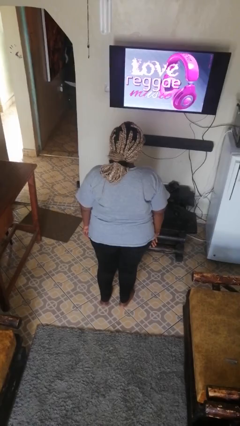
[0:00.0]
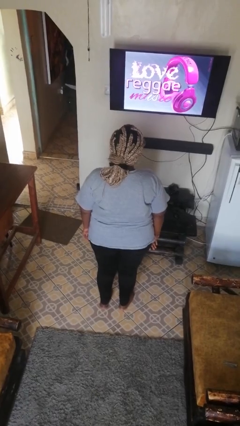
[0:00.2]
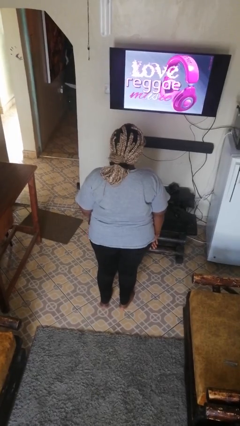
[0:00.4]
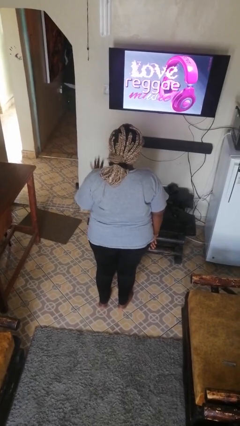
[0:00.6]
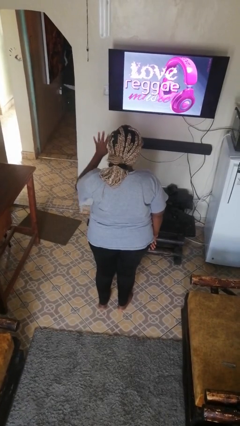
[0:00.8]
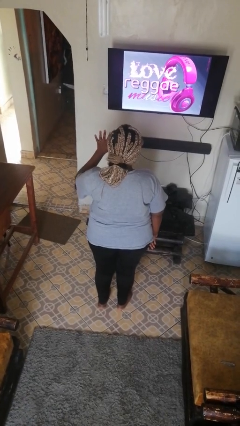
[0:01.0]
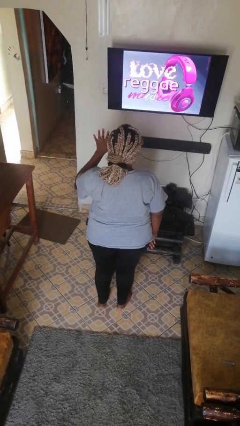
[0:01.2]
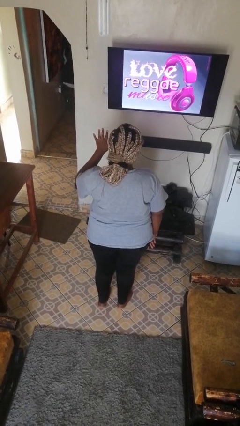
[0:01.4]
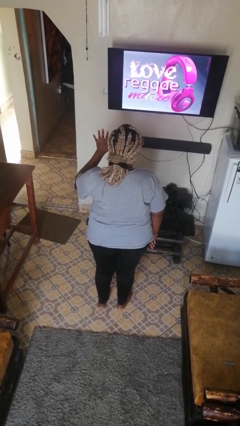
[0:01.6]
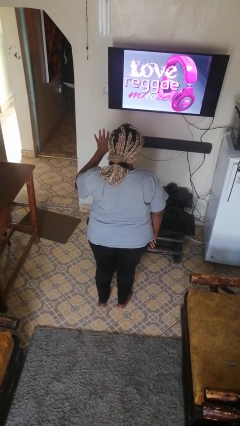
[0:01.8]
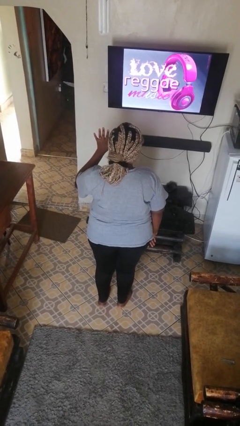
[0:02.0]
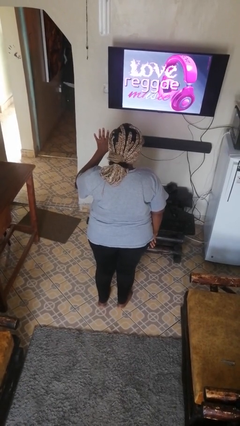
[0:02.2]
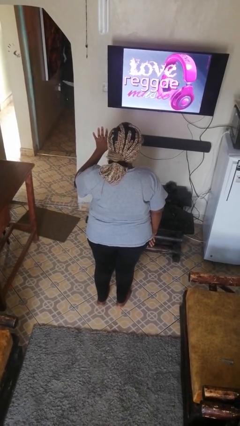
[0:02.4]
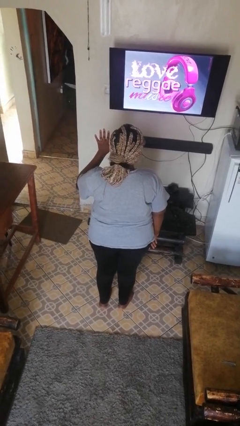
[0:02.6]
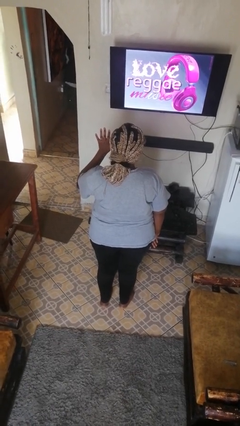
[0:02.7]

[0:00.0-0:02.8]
person gestures stop

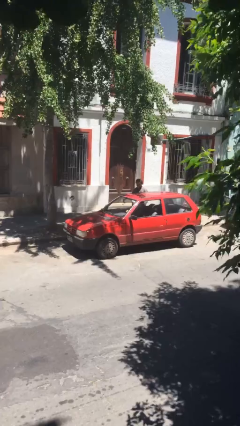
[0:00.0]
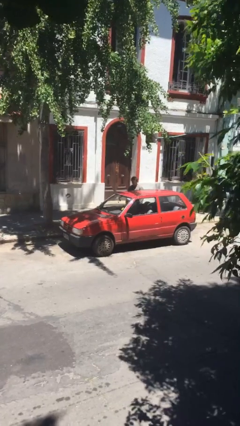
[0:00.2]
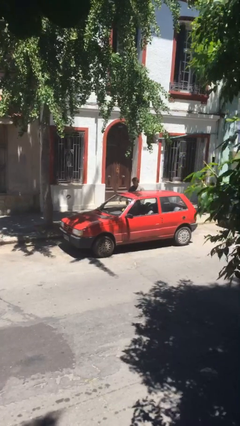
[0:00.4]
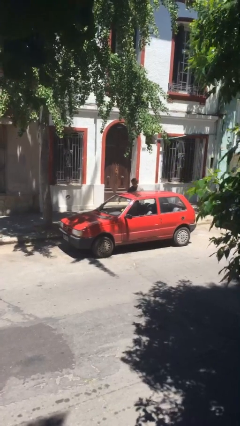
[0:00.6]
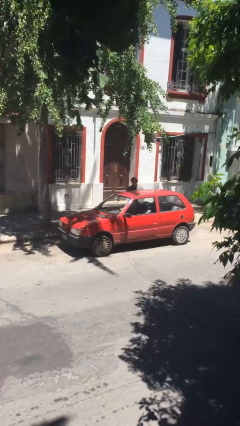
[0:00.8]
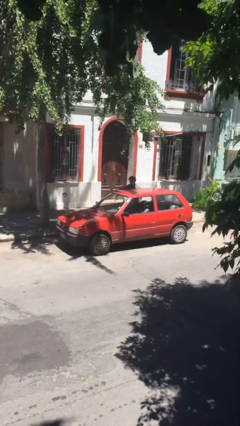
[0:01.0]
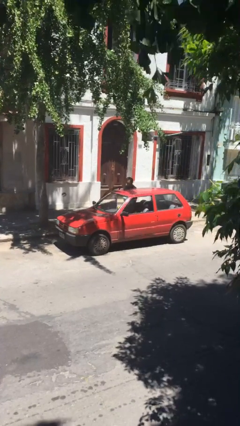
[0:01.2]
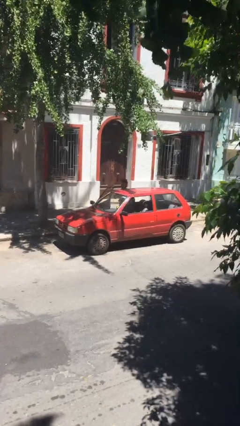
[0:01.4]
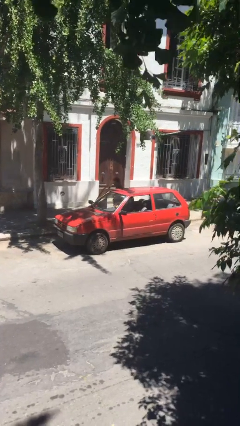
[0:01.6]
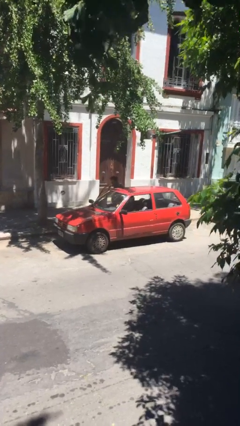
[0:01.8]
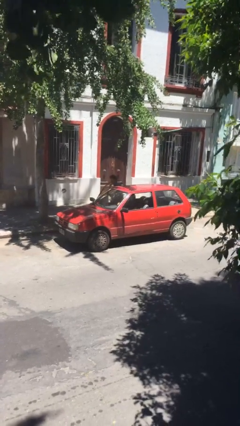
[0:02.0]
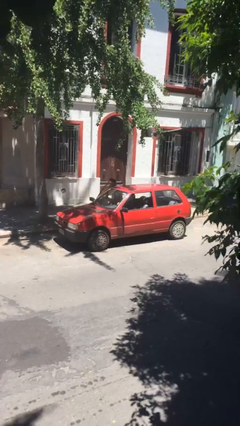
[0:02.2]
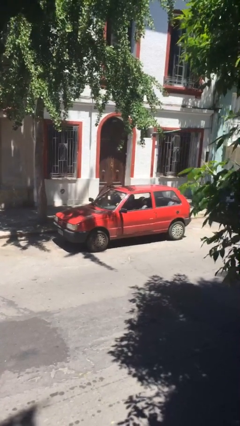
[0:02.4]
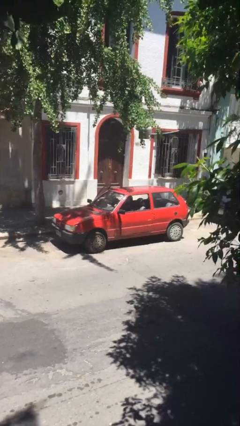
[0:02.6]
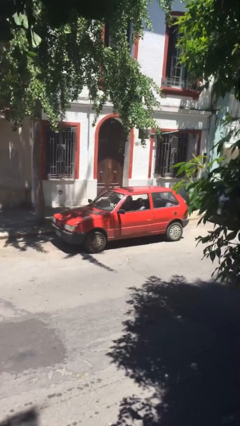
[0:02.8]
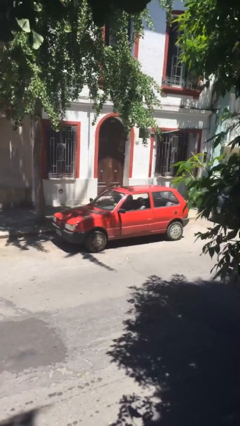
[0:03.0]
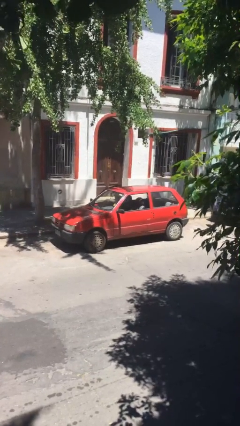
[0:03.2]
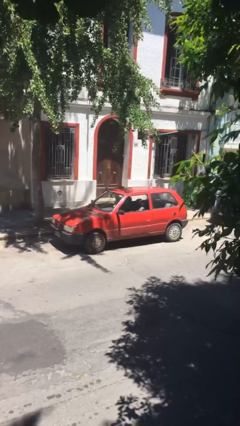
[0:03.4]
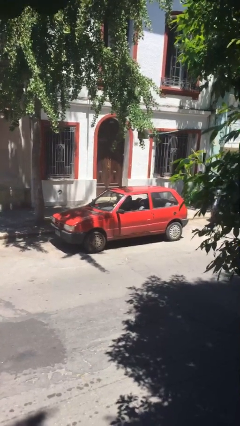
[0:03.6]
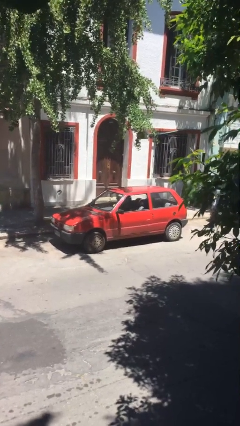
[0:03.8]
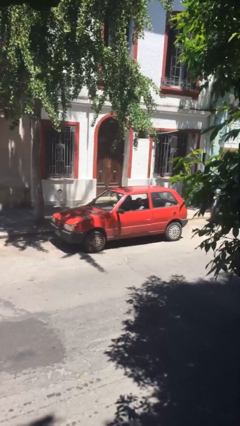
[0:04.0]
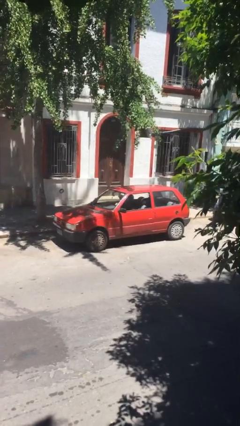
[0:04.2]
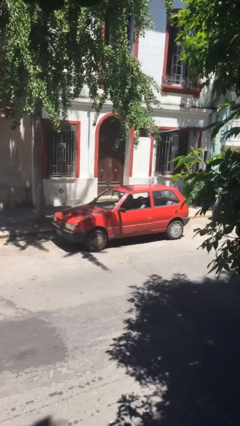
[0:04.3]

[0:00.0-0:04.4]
car picks up person

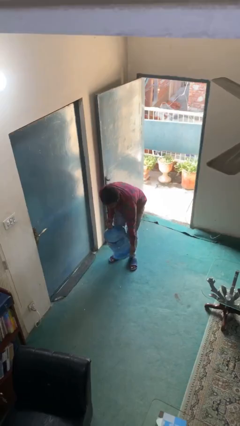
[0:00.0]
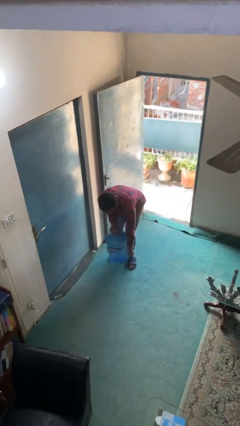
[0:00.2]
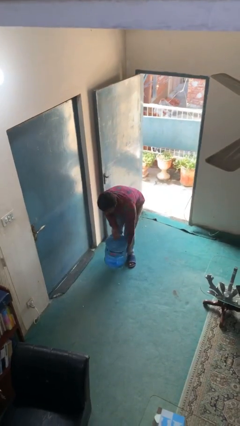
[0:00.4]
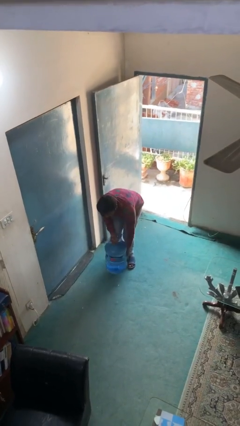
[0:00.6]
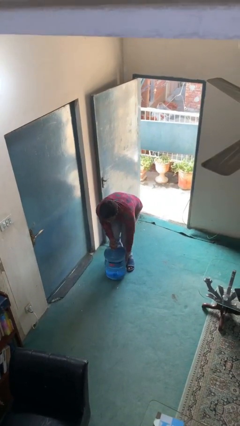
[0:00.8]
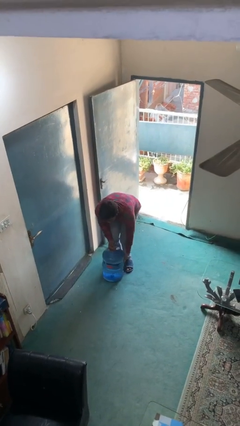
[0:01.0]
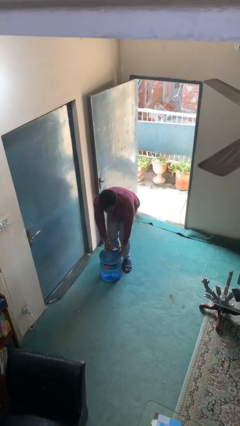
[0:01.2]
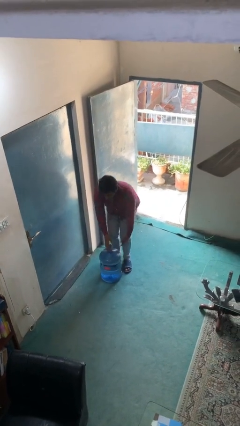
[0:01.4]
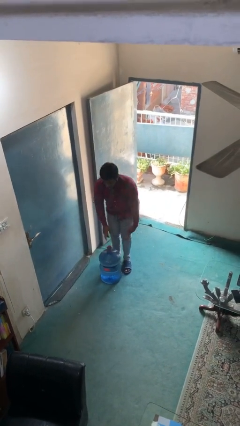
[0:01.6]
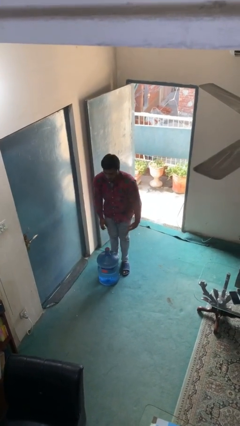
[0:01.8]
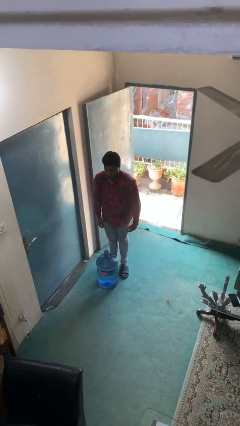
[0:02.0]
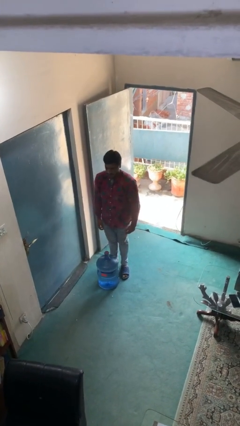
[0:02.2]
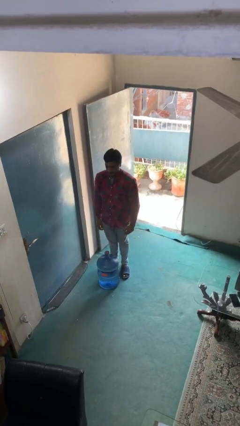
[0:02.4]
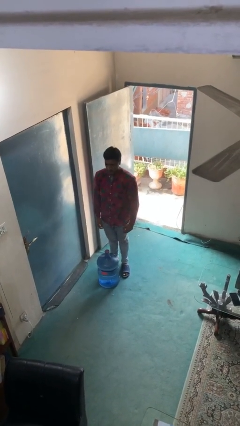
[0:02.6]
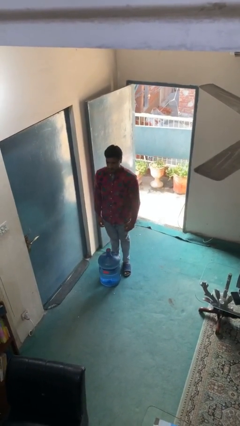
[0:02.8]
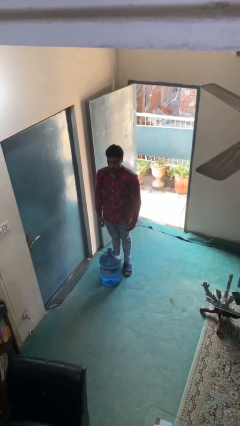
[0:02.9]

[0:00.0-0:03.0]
person puts down object on floor

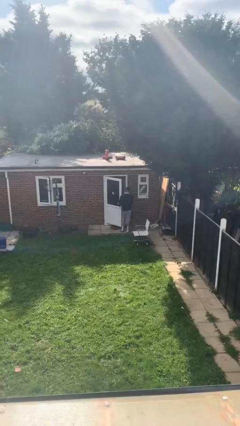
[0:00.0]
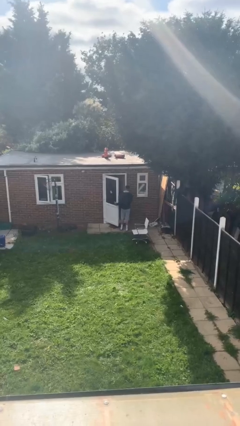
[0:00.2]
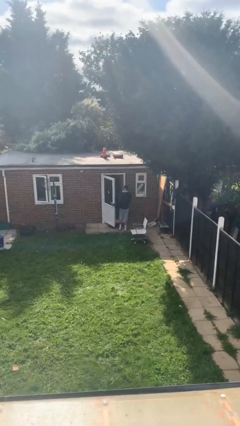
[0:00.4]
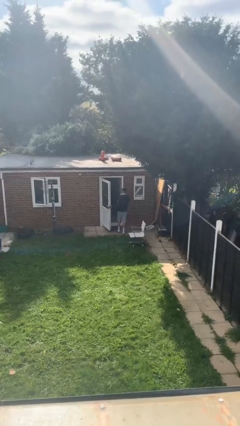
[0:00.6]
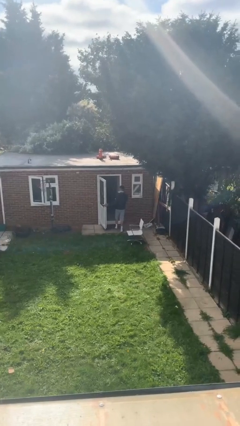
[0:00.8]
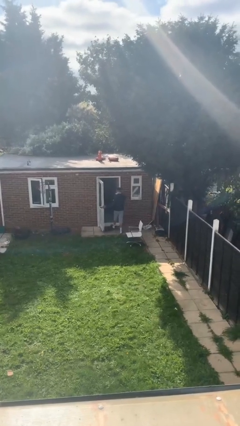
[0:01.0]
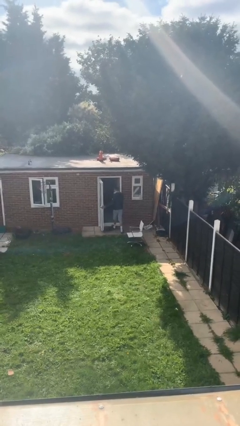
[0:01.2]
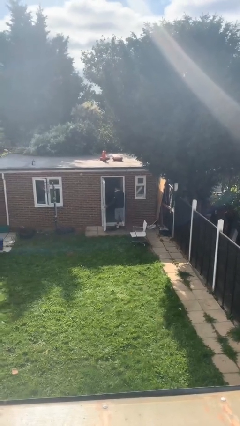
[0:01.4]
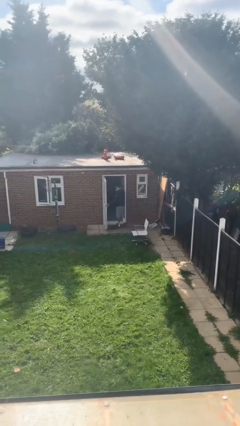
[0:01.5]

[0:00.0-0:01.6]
person exits scene through structure

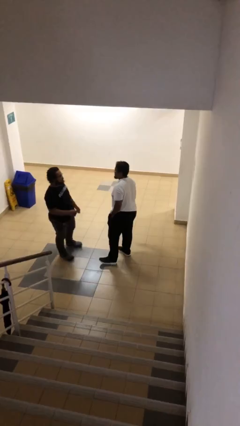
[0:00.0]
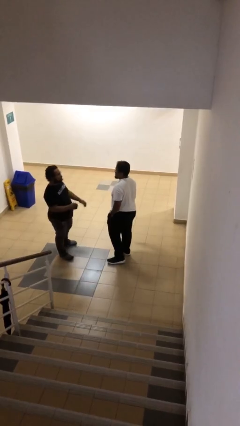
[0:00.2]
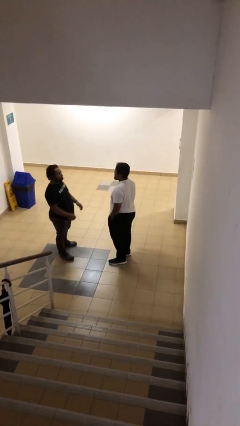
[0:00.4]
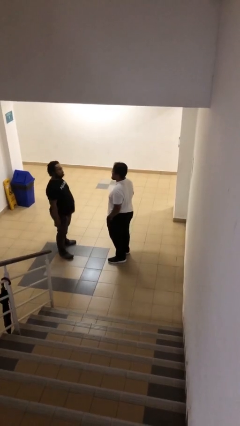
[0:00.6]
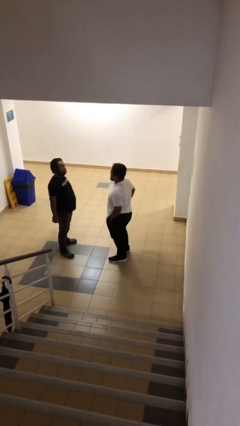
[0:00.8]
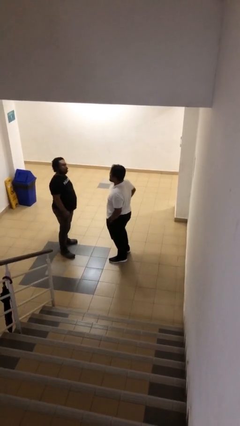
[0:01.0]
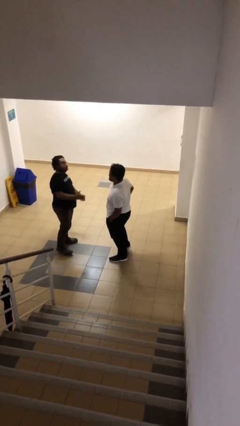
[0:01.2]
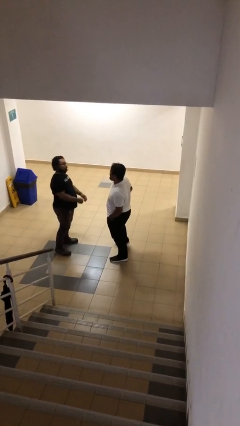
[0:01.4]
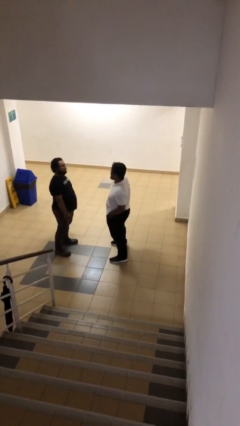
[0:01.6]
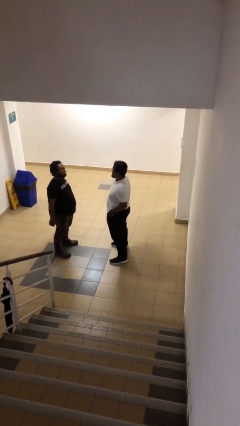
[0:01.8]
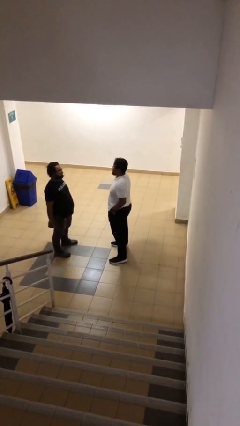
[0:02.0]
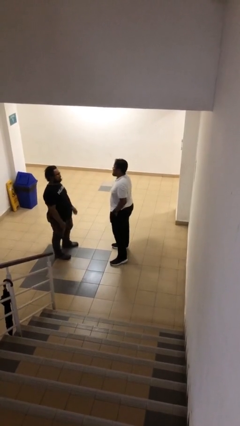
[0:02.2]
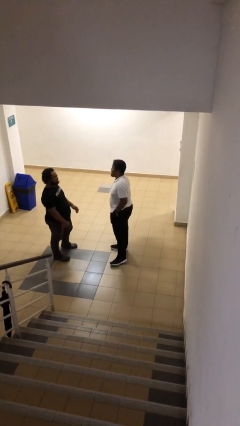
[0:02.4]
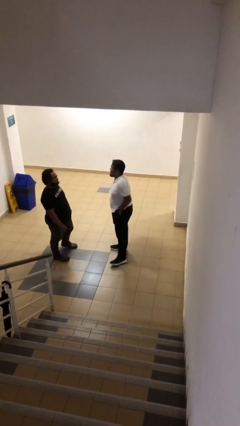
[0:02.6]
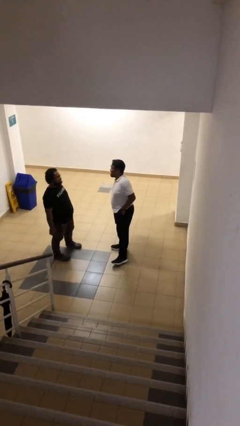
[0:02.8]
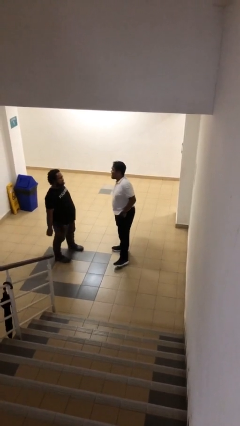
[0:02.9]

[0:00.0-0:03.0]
person talks to person

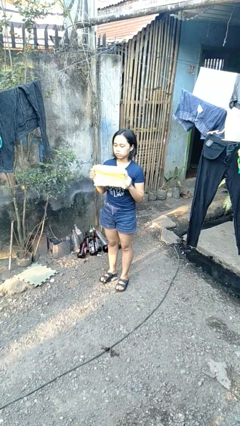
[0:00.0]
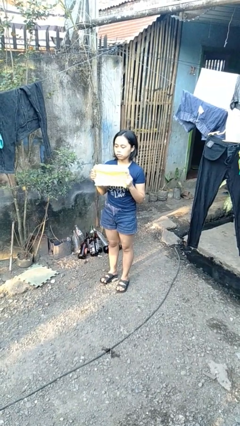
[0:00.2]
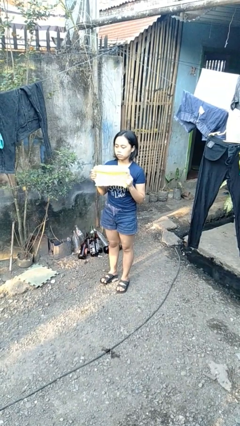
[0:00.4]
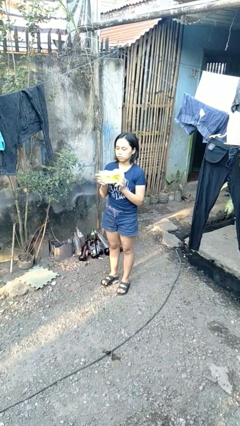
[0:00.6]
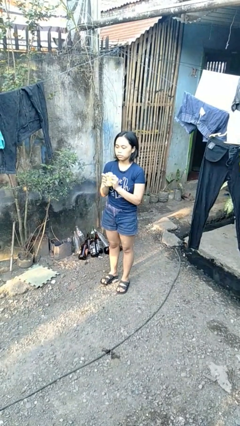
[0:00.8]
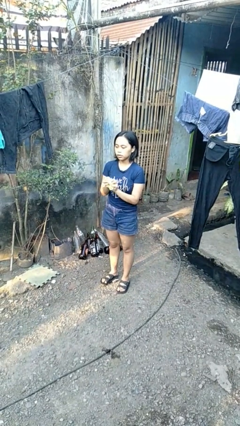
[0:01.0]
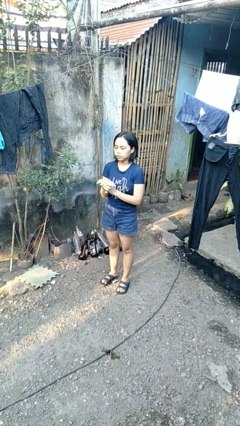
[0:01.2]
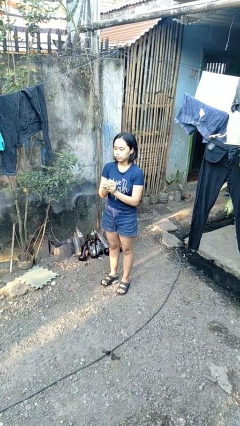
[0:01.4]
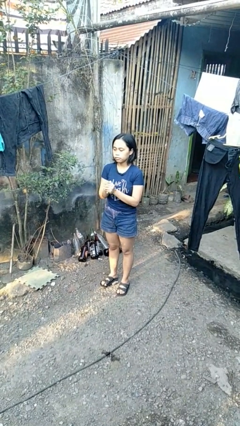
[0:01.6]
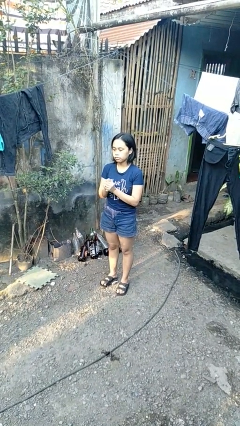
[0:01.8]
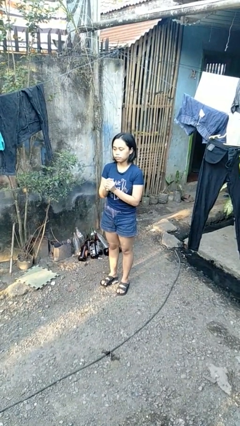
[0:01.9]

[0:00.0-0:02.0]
person crumples paper

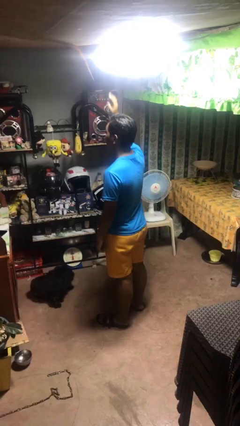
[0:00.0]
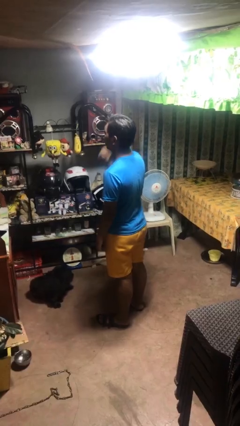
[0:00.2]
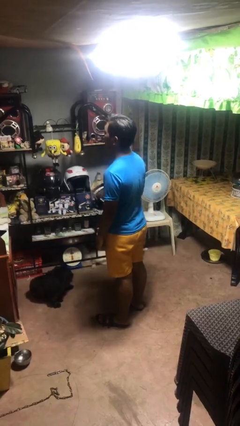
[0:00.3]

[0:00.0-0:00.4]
person gestures lower hand
